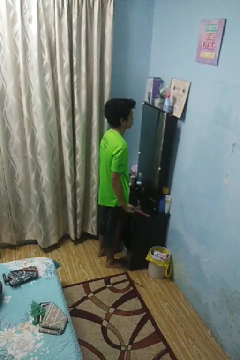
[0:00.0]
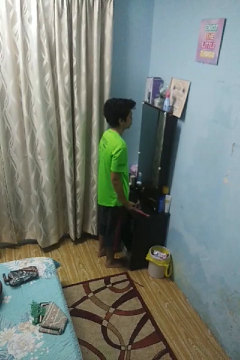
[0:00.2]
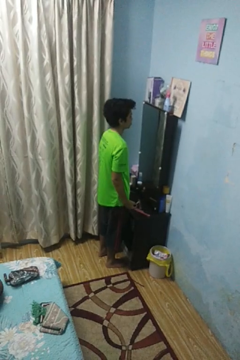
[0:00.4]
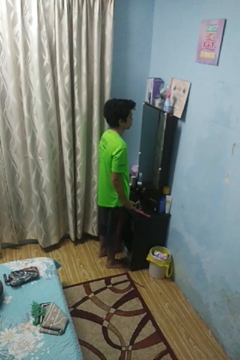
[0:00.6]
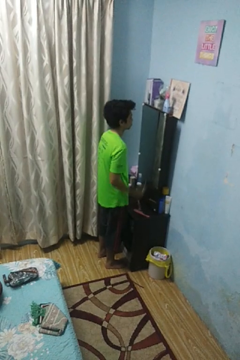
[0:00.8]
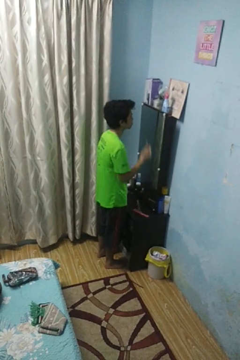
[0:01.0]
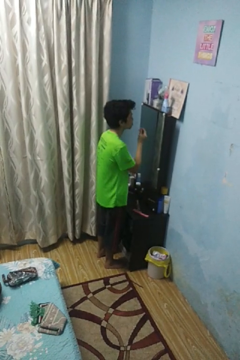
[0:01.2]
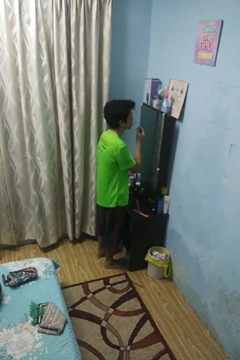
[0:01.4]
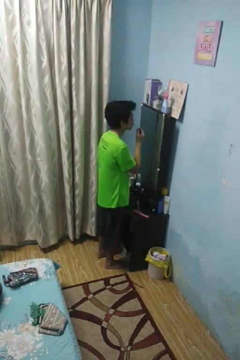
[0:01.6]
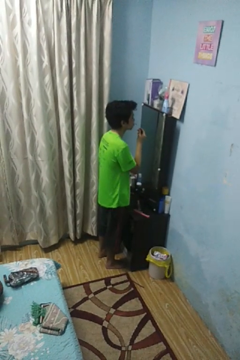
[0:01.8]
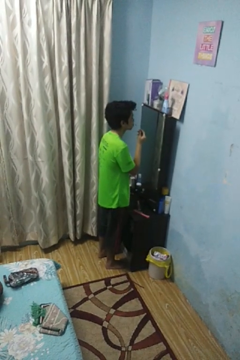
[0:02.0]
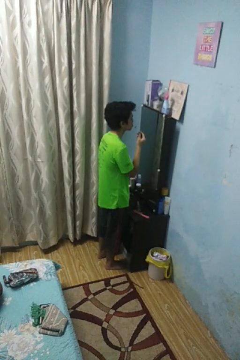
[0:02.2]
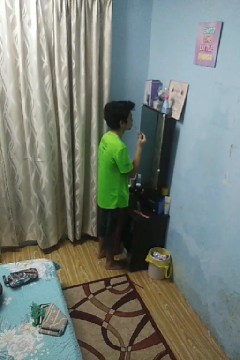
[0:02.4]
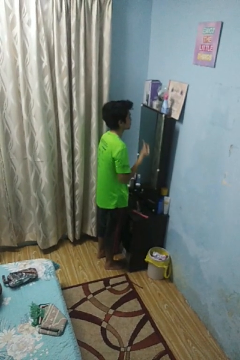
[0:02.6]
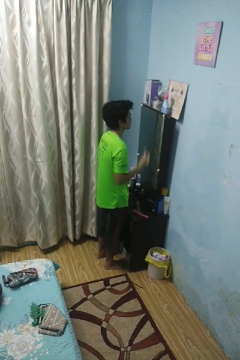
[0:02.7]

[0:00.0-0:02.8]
person applies lip makeup

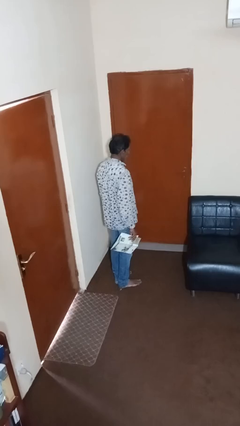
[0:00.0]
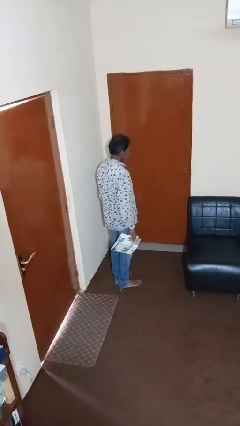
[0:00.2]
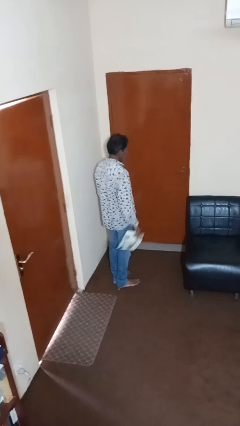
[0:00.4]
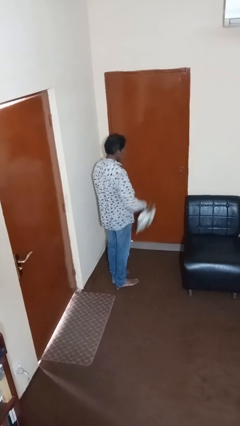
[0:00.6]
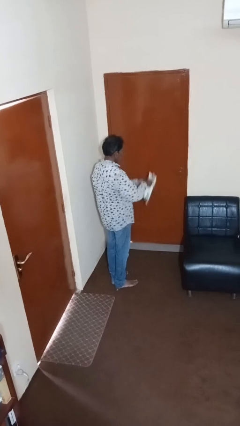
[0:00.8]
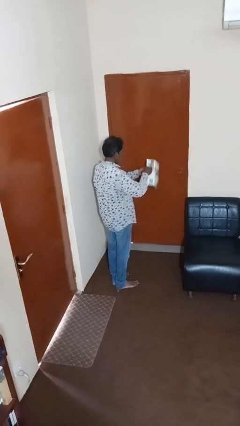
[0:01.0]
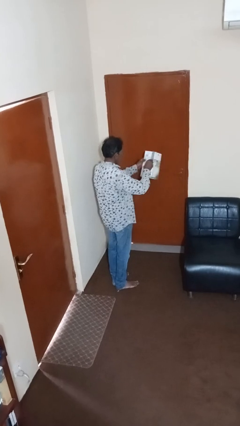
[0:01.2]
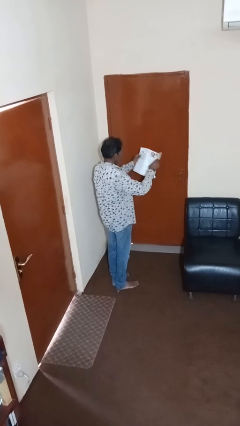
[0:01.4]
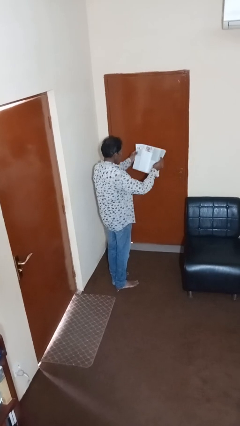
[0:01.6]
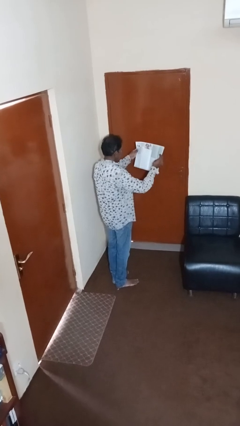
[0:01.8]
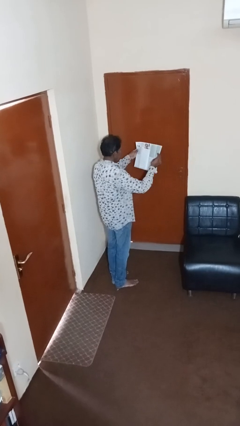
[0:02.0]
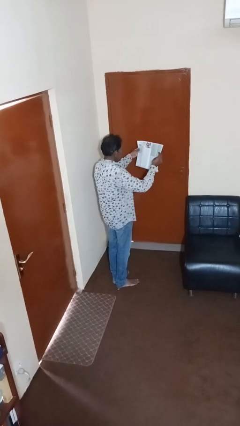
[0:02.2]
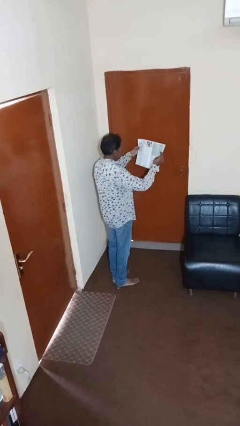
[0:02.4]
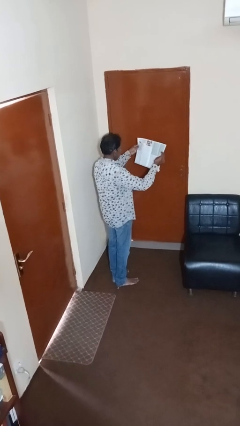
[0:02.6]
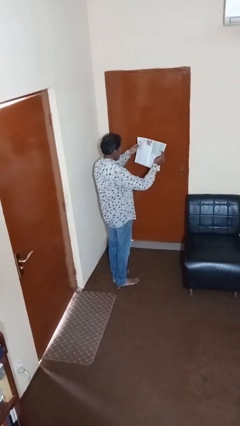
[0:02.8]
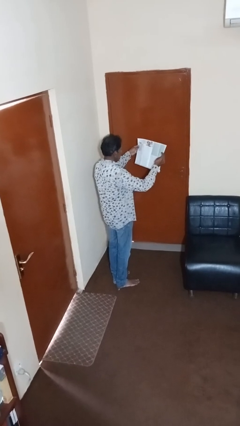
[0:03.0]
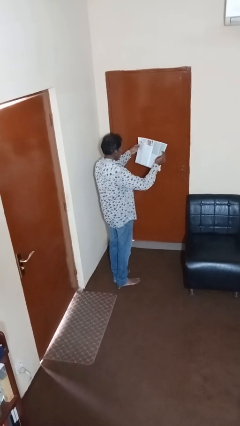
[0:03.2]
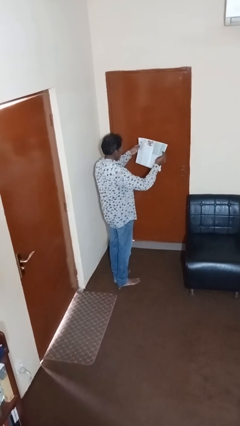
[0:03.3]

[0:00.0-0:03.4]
person reads magazine

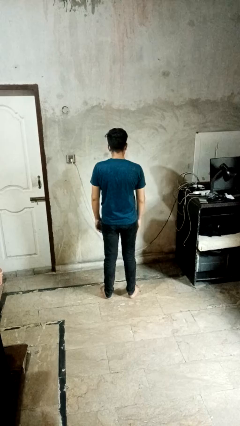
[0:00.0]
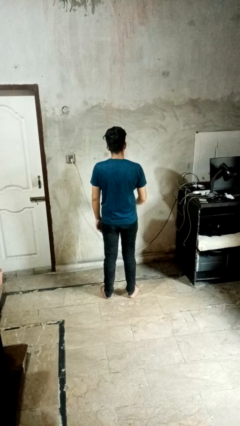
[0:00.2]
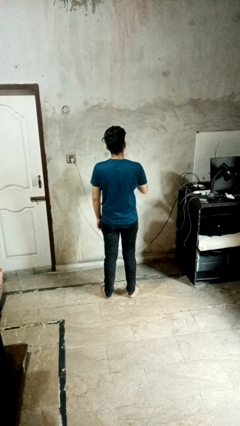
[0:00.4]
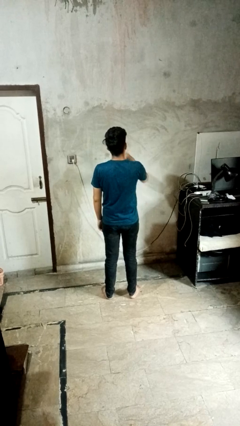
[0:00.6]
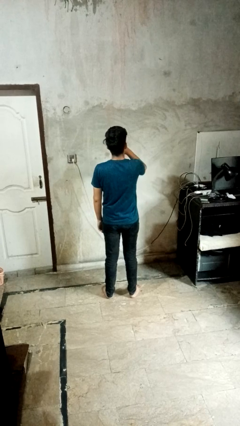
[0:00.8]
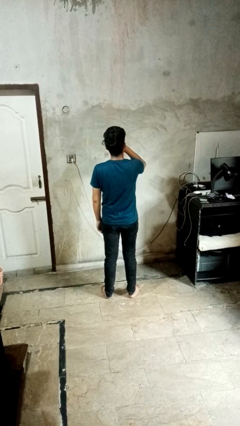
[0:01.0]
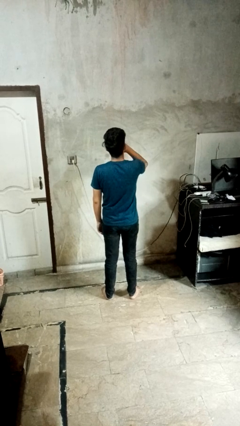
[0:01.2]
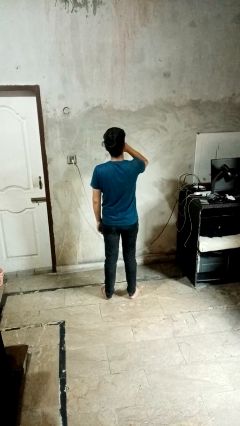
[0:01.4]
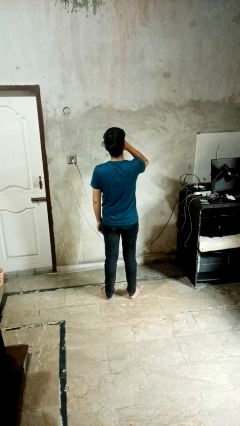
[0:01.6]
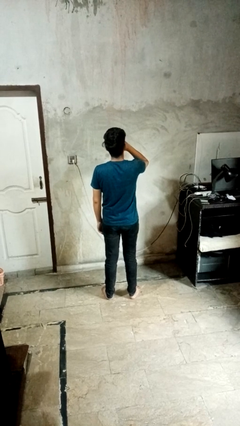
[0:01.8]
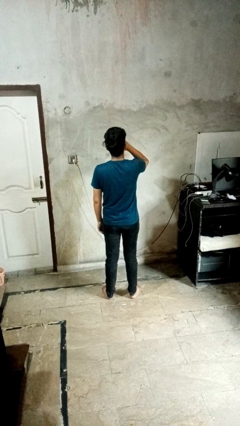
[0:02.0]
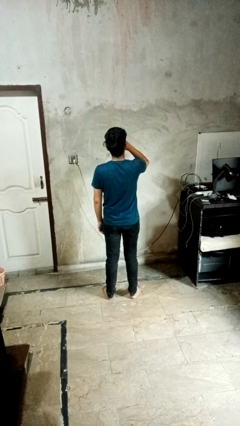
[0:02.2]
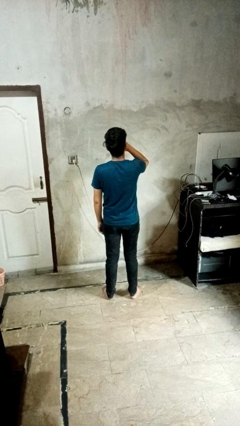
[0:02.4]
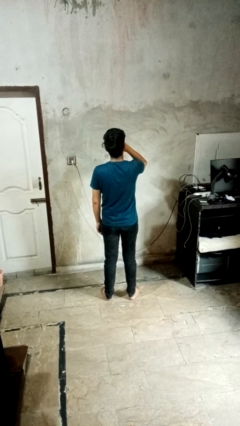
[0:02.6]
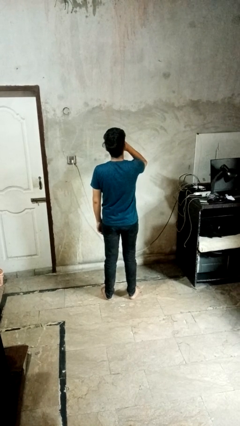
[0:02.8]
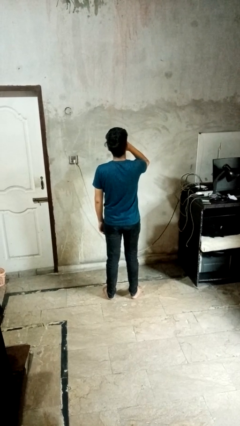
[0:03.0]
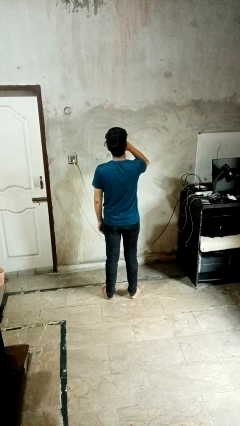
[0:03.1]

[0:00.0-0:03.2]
person yawns

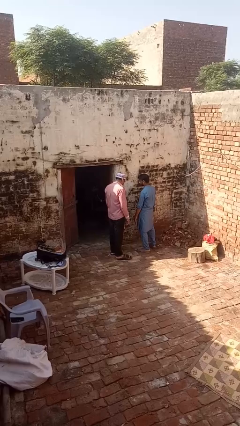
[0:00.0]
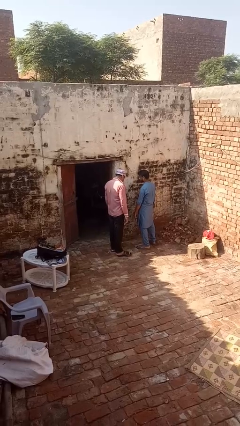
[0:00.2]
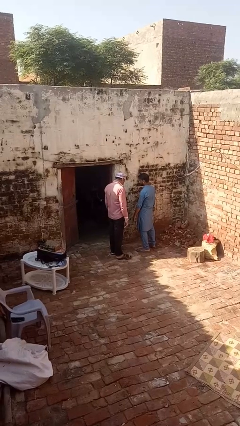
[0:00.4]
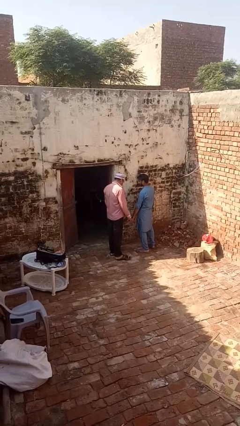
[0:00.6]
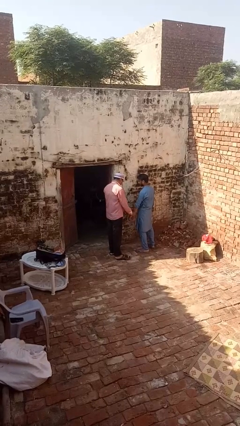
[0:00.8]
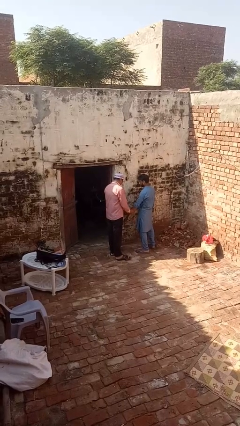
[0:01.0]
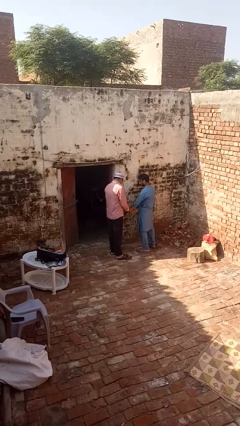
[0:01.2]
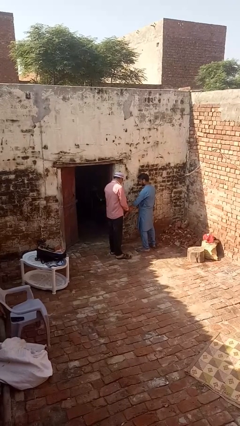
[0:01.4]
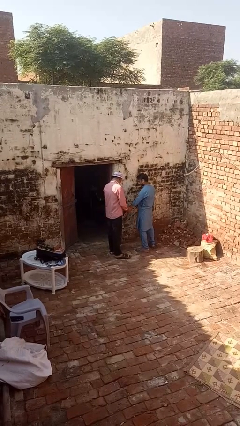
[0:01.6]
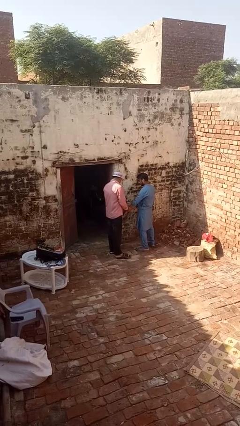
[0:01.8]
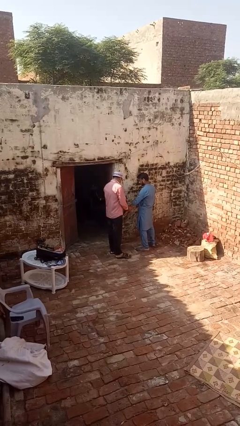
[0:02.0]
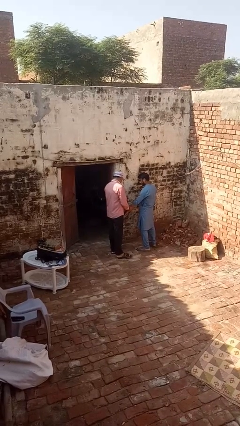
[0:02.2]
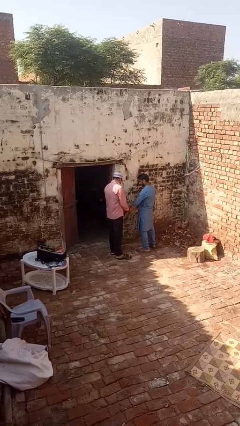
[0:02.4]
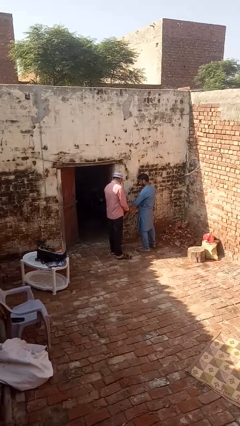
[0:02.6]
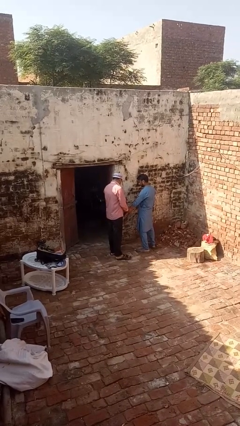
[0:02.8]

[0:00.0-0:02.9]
person grabs person by forearm

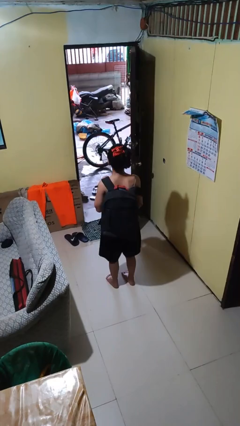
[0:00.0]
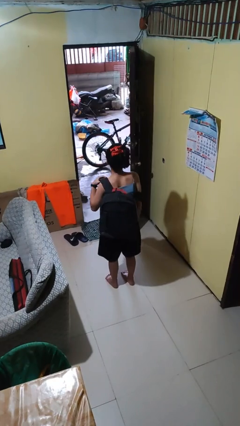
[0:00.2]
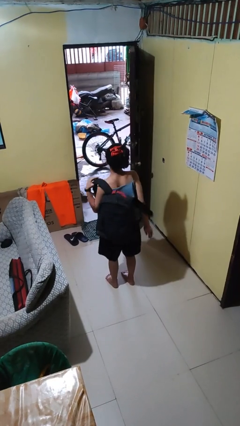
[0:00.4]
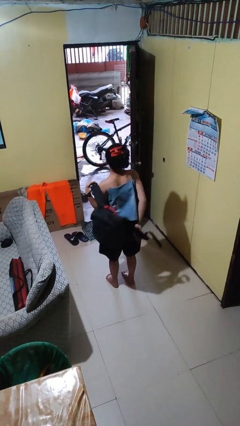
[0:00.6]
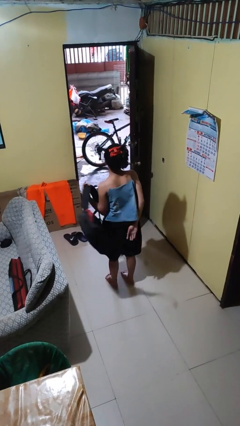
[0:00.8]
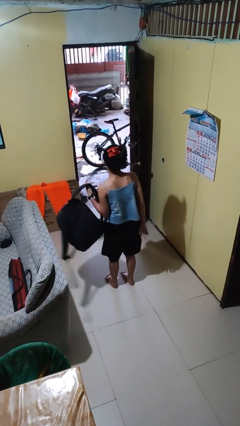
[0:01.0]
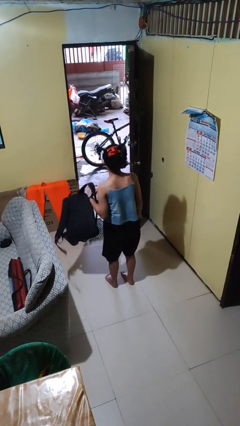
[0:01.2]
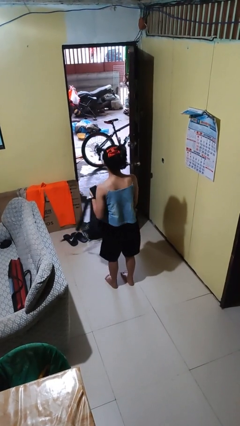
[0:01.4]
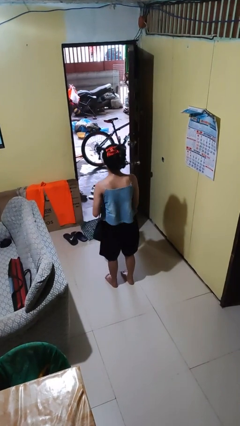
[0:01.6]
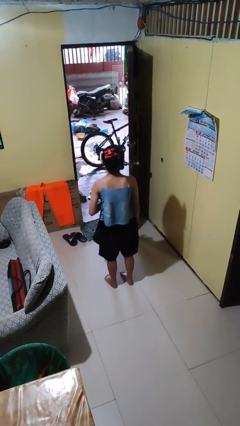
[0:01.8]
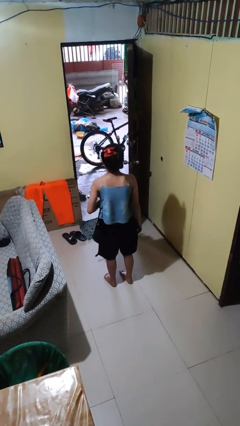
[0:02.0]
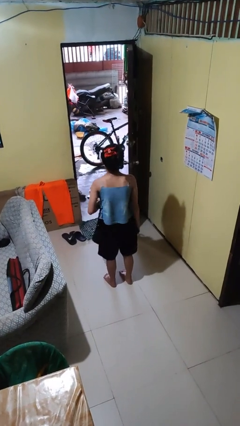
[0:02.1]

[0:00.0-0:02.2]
person takes off backpack

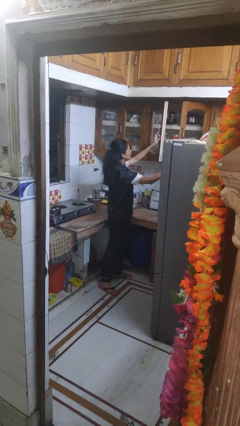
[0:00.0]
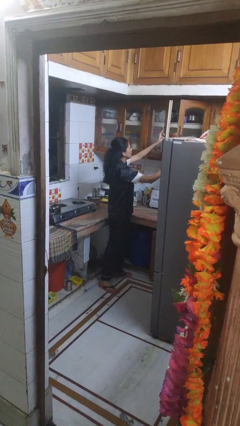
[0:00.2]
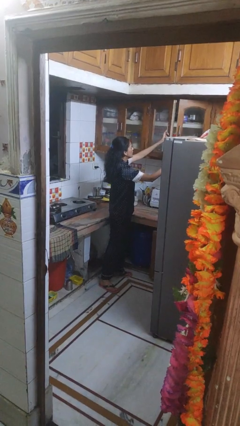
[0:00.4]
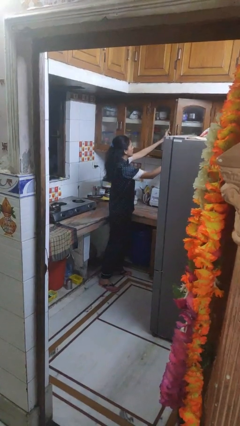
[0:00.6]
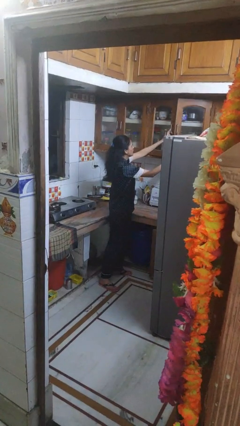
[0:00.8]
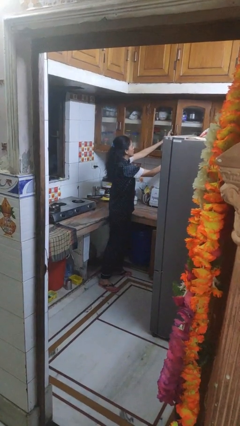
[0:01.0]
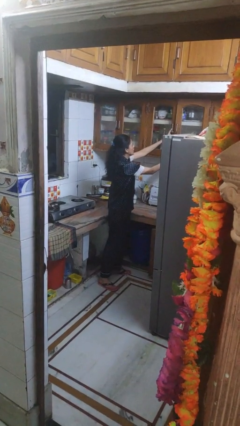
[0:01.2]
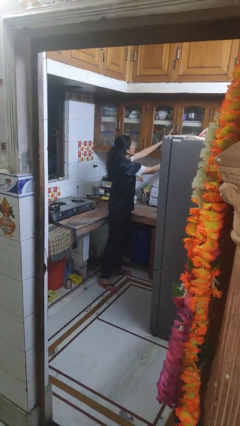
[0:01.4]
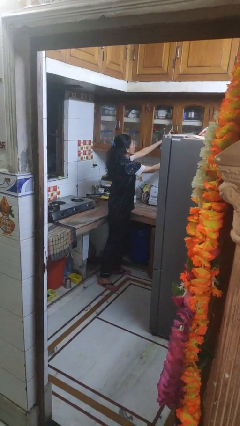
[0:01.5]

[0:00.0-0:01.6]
person closes cabinet

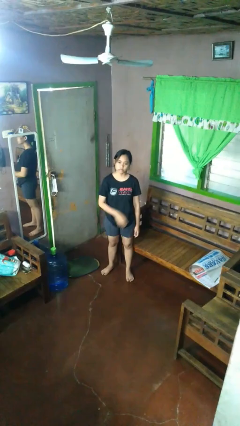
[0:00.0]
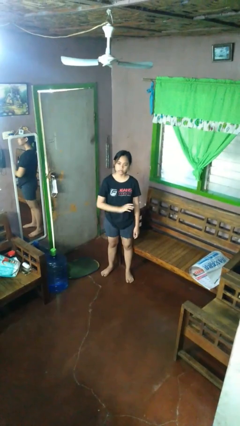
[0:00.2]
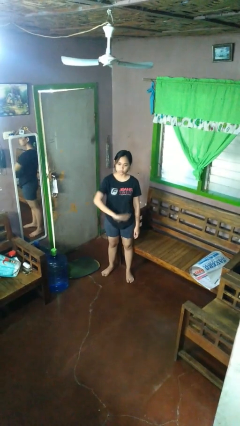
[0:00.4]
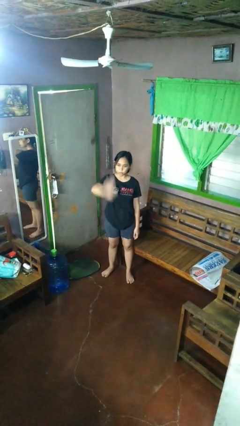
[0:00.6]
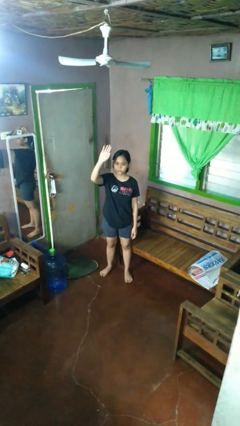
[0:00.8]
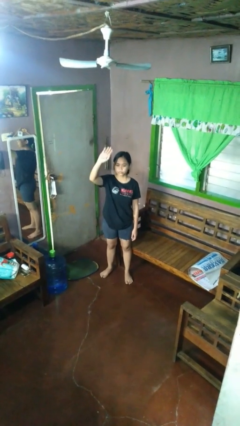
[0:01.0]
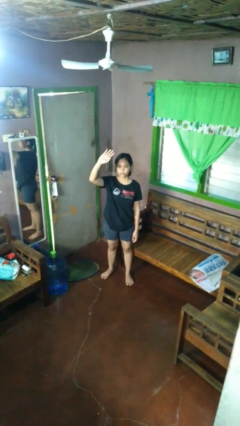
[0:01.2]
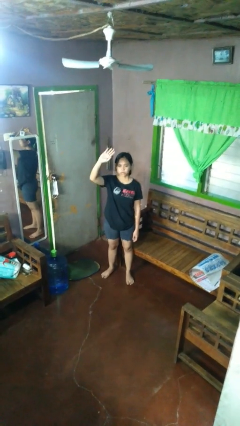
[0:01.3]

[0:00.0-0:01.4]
person gestures swipe up

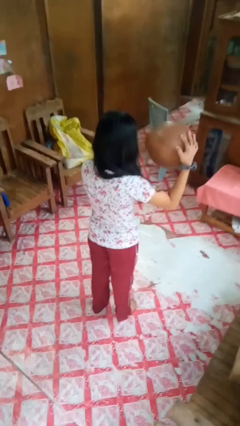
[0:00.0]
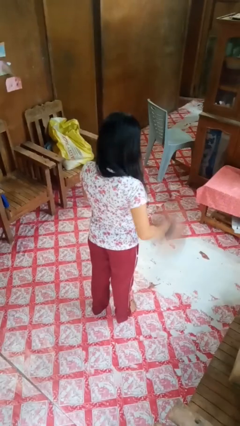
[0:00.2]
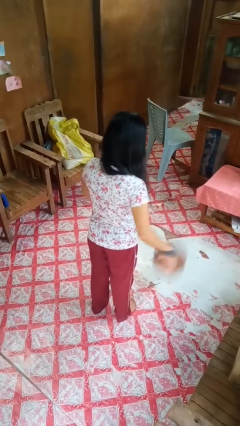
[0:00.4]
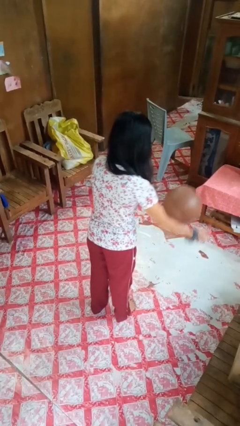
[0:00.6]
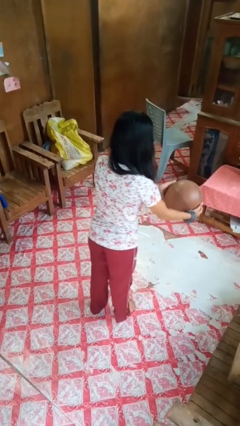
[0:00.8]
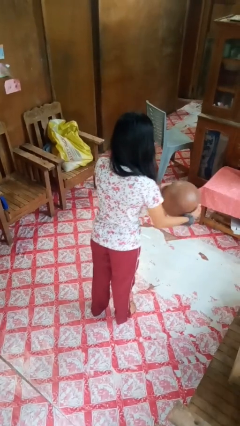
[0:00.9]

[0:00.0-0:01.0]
person bounces ball on floor
